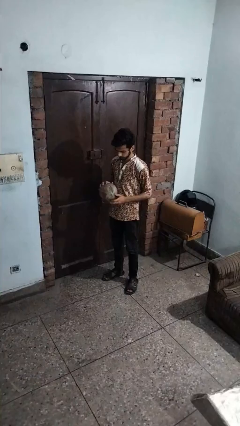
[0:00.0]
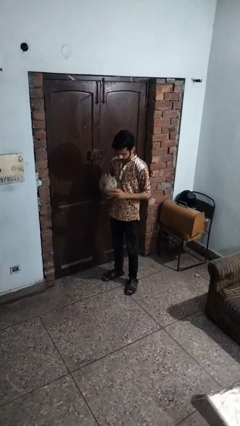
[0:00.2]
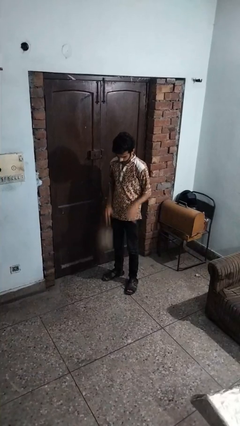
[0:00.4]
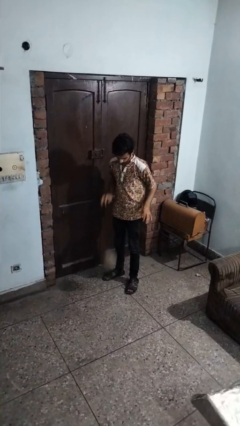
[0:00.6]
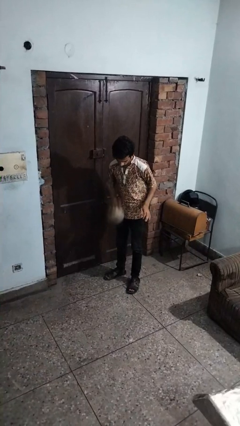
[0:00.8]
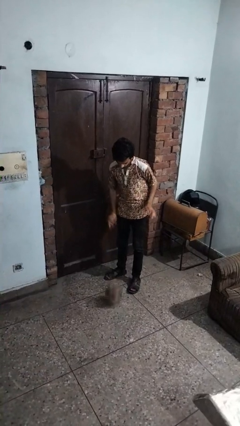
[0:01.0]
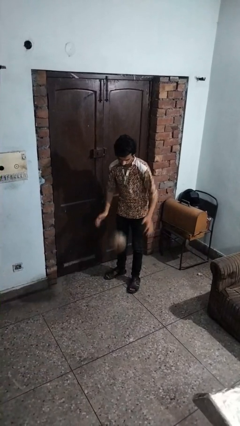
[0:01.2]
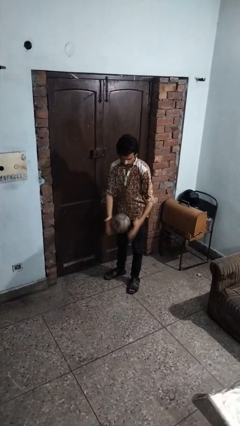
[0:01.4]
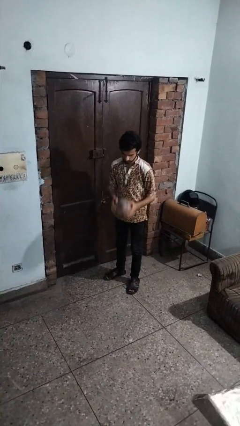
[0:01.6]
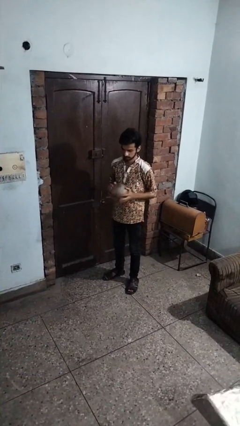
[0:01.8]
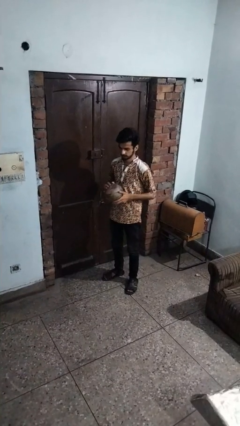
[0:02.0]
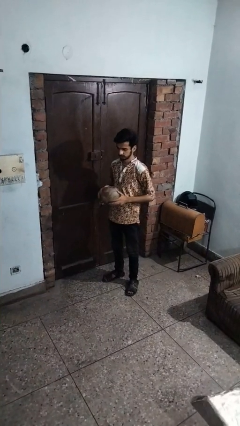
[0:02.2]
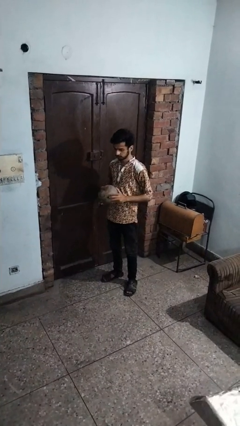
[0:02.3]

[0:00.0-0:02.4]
person bounces ball on floor

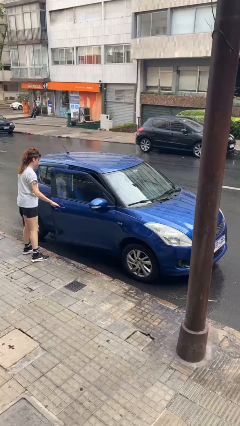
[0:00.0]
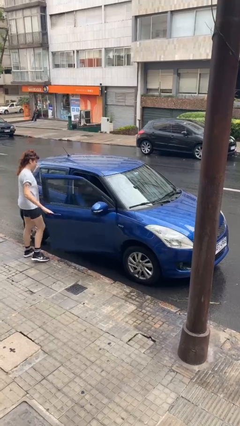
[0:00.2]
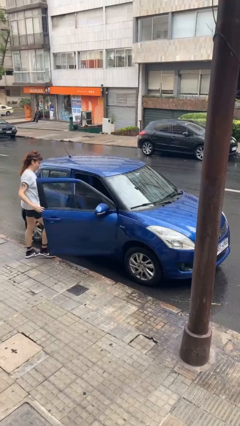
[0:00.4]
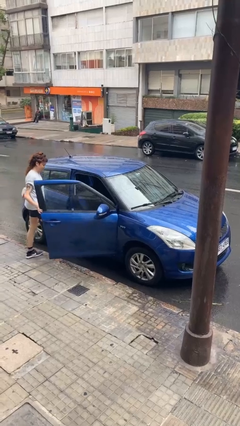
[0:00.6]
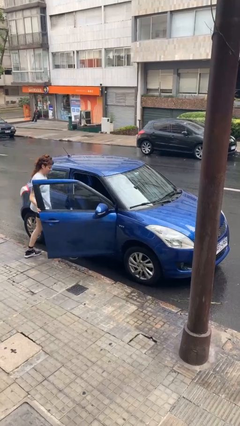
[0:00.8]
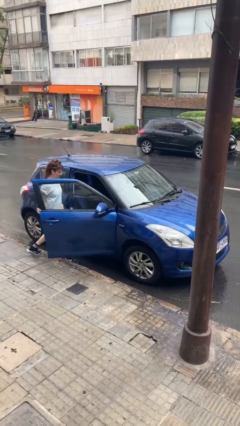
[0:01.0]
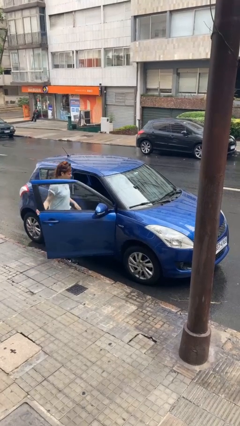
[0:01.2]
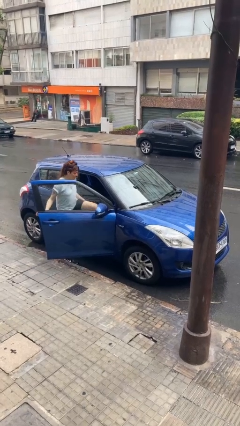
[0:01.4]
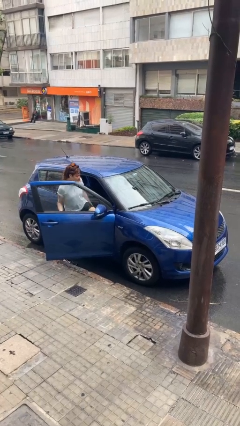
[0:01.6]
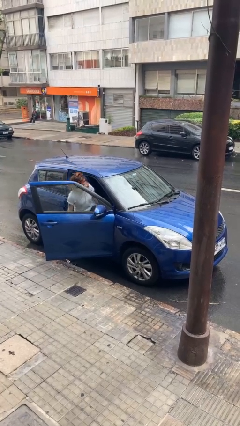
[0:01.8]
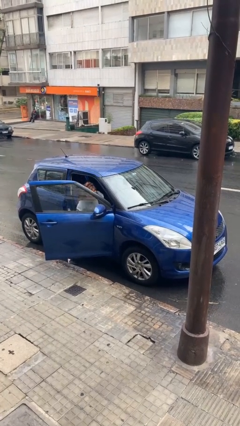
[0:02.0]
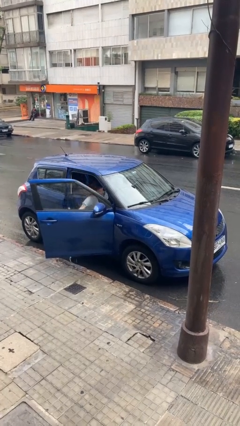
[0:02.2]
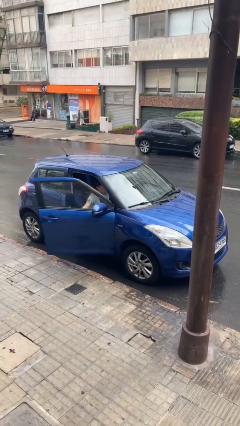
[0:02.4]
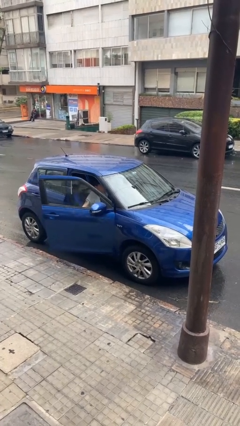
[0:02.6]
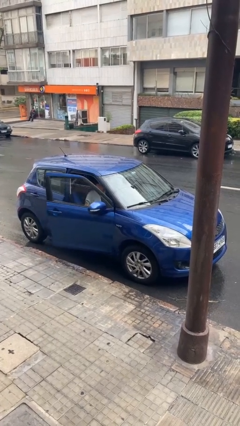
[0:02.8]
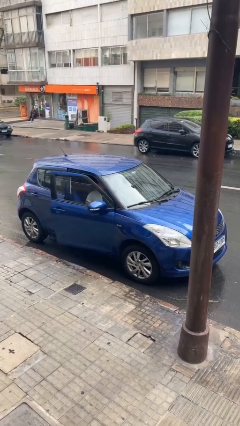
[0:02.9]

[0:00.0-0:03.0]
car picks up person

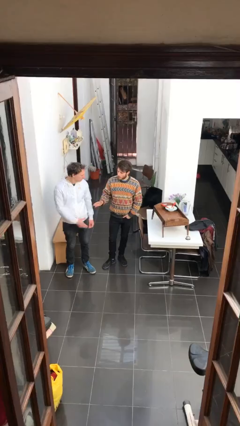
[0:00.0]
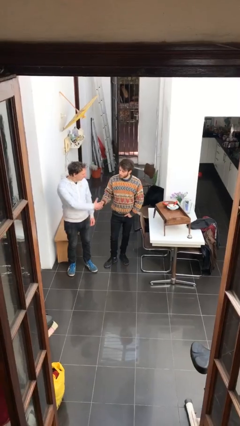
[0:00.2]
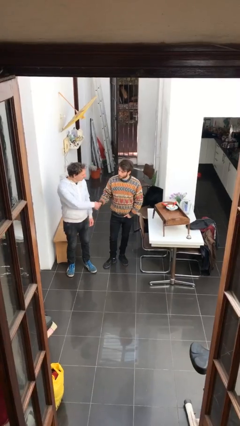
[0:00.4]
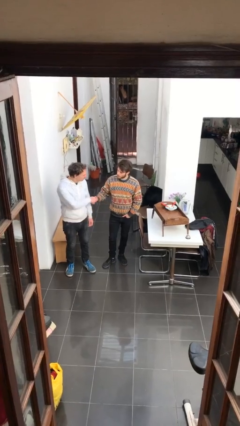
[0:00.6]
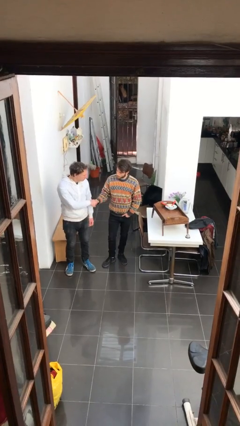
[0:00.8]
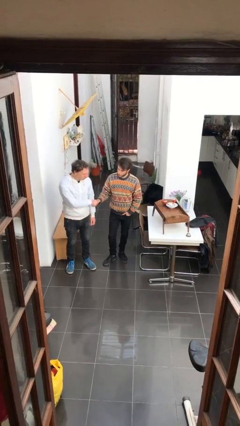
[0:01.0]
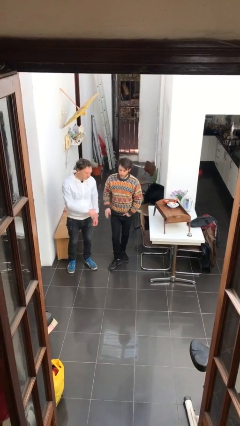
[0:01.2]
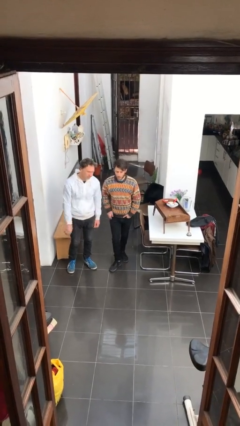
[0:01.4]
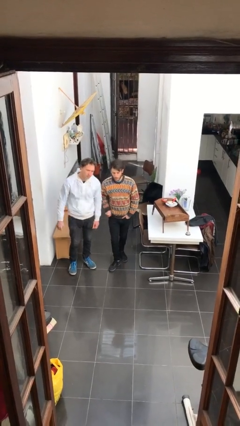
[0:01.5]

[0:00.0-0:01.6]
person shakes hand

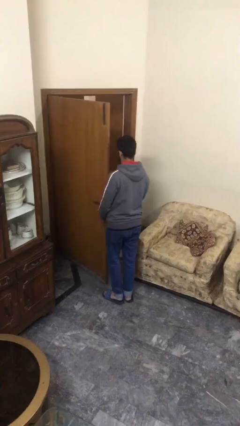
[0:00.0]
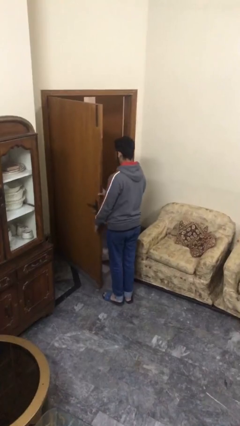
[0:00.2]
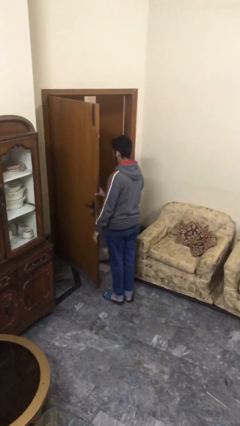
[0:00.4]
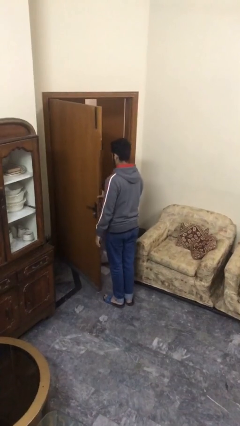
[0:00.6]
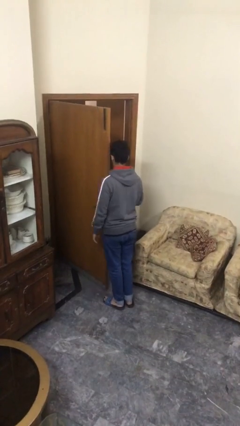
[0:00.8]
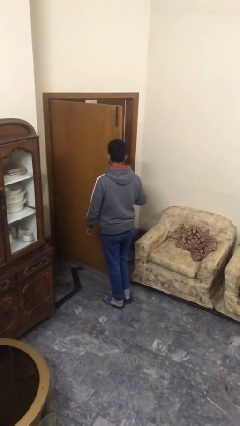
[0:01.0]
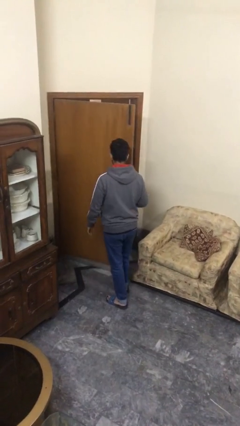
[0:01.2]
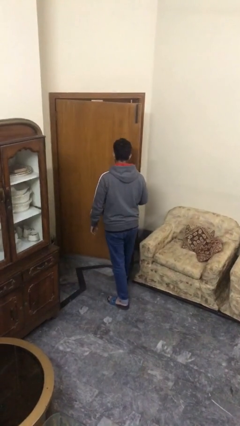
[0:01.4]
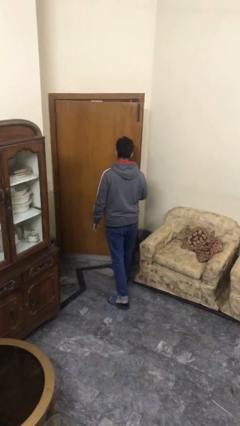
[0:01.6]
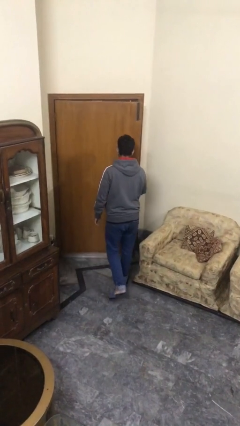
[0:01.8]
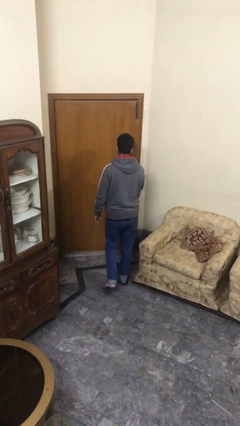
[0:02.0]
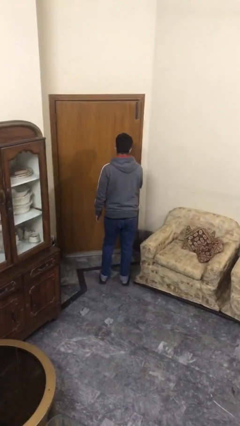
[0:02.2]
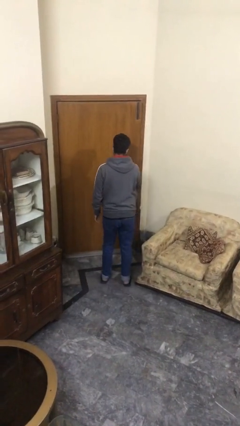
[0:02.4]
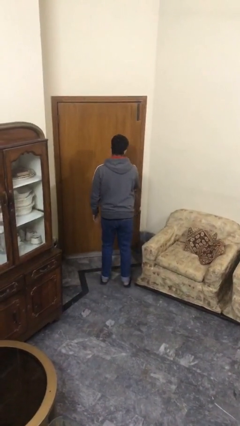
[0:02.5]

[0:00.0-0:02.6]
person closes facility door

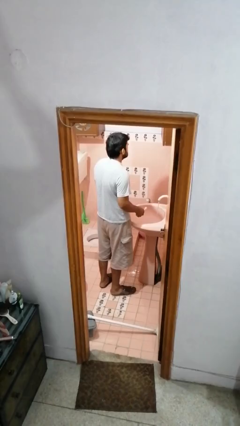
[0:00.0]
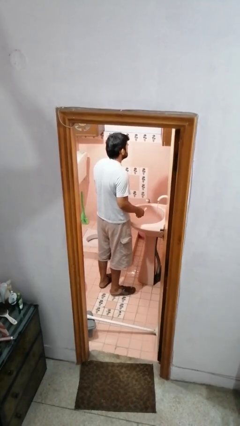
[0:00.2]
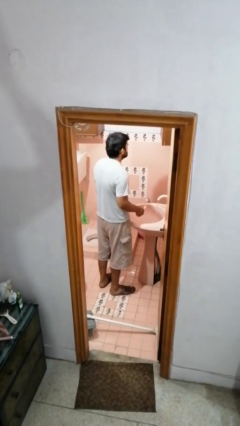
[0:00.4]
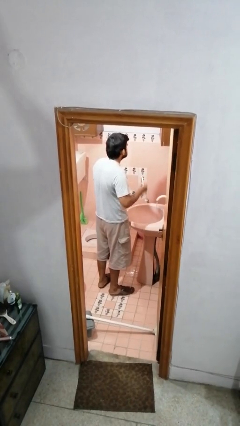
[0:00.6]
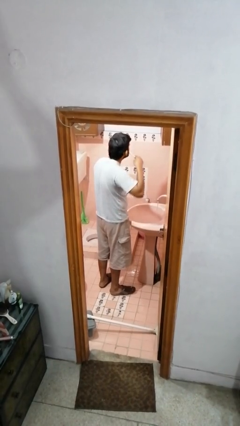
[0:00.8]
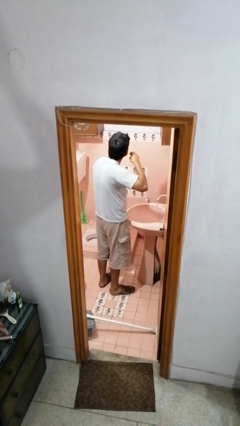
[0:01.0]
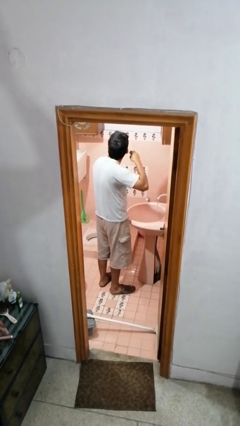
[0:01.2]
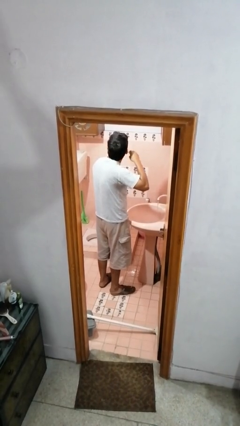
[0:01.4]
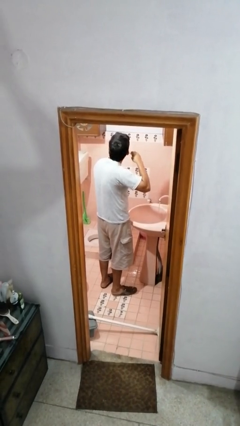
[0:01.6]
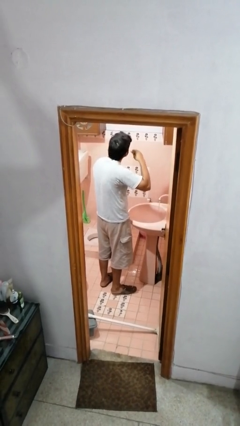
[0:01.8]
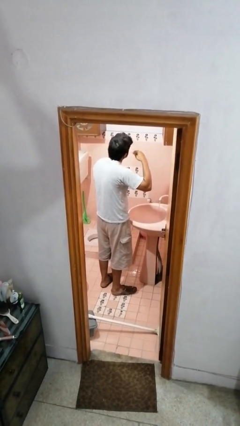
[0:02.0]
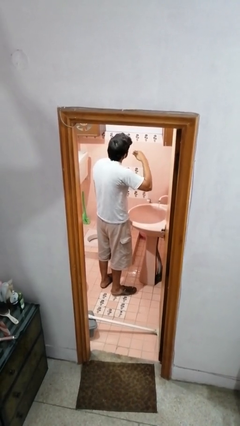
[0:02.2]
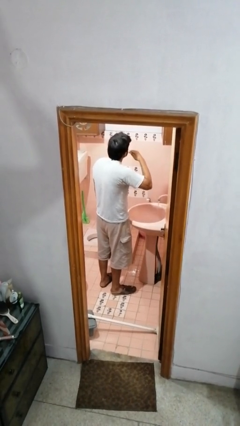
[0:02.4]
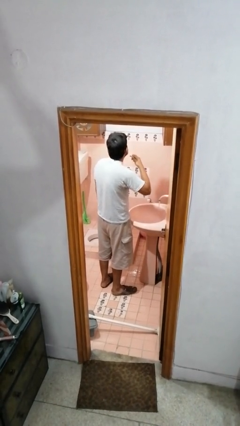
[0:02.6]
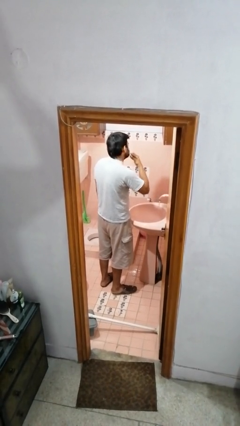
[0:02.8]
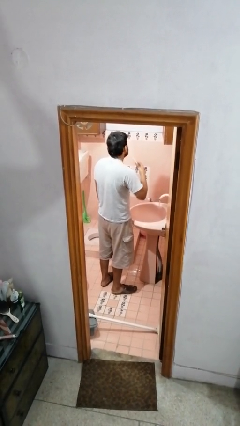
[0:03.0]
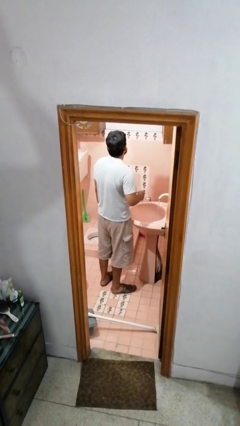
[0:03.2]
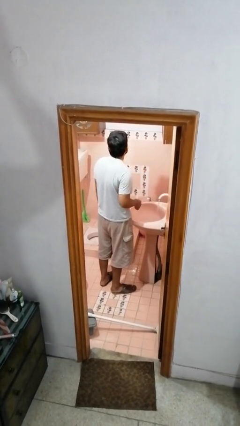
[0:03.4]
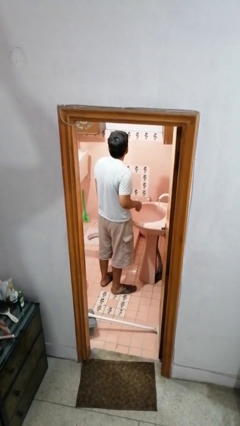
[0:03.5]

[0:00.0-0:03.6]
person brushes teeth

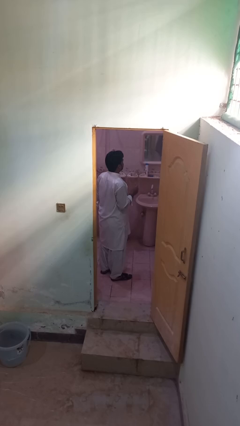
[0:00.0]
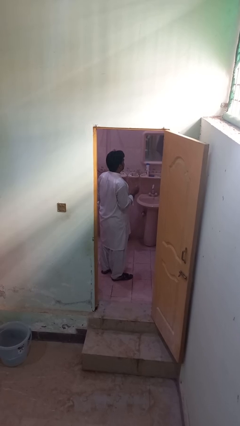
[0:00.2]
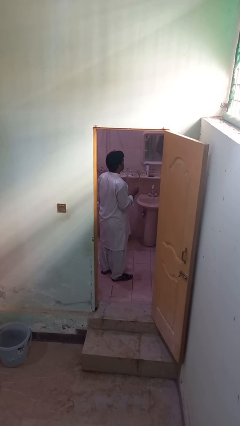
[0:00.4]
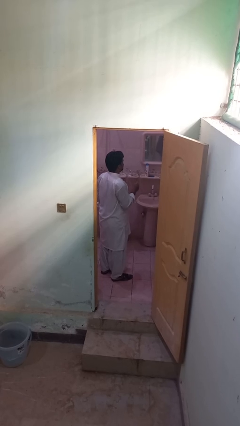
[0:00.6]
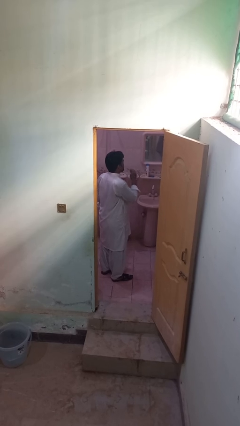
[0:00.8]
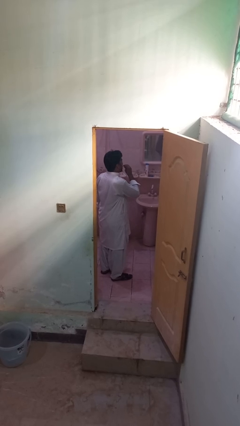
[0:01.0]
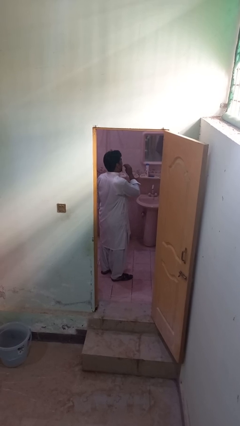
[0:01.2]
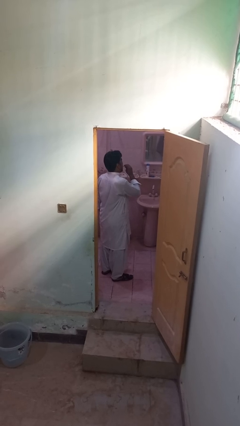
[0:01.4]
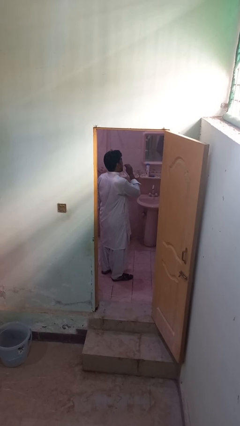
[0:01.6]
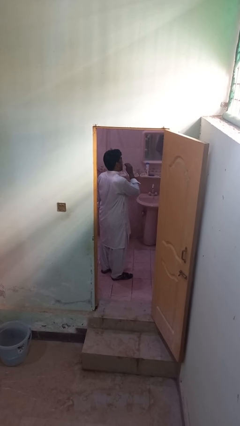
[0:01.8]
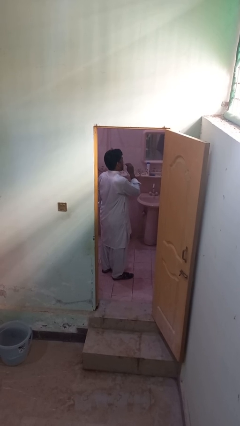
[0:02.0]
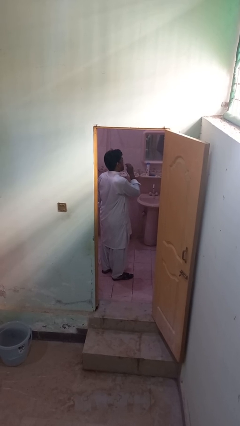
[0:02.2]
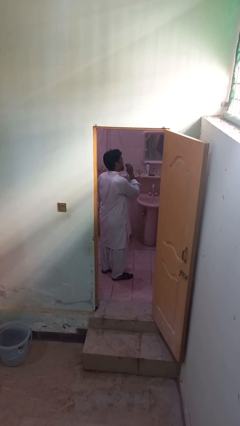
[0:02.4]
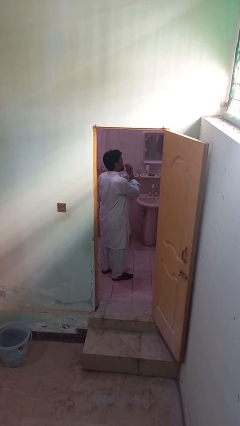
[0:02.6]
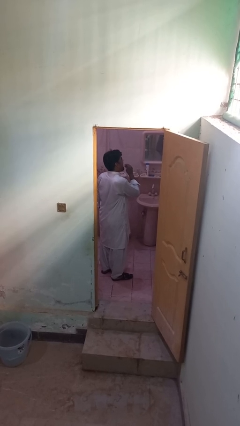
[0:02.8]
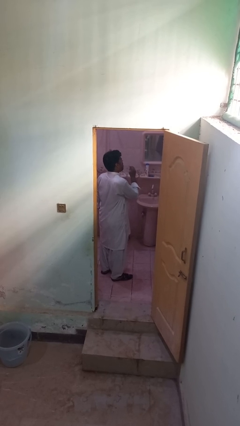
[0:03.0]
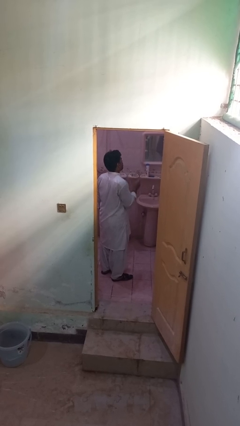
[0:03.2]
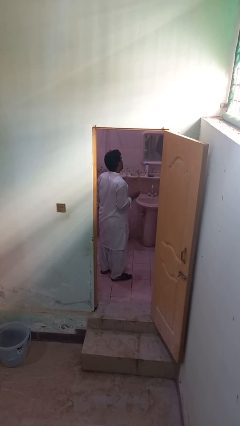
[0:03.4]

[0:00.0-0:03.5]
person flosses

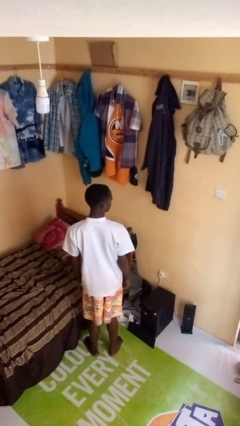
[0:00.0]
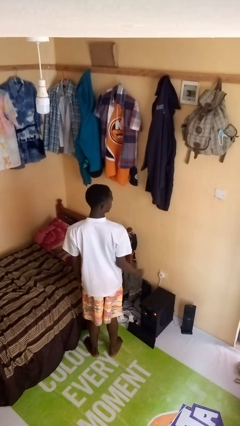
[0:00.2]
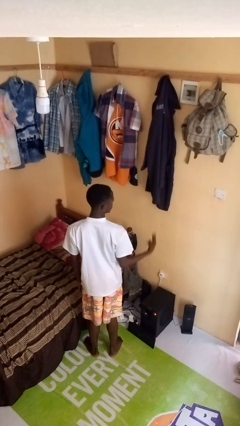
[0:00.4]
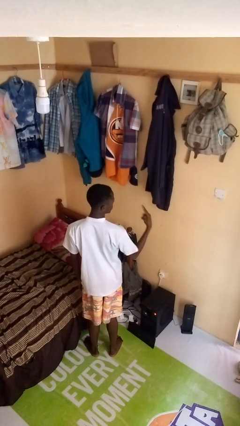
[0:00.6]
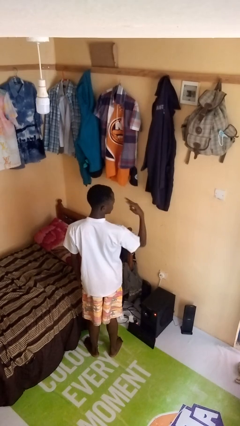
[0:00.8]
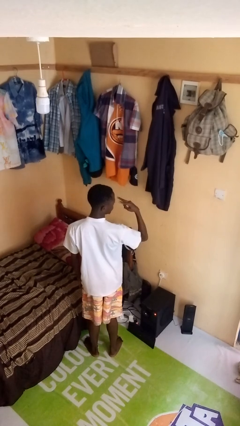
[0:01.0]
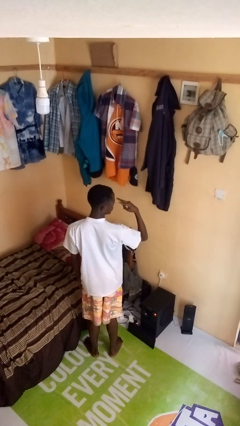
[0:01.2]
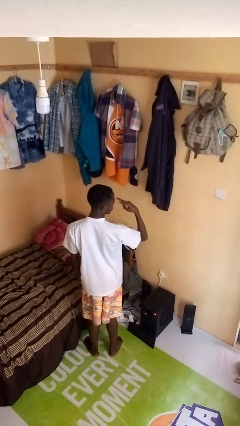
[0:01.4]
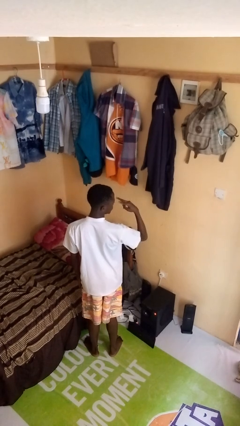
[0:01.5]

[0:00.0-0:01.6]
person gestures watch closely
